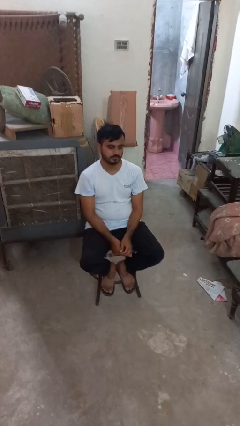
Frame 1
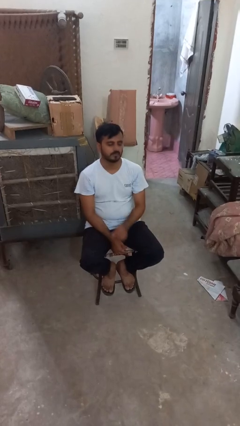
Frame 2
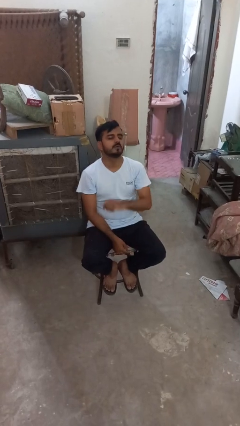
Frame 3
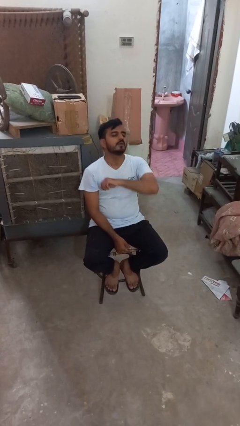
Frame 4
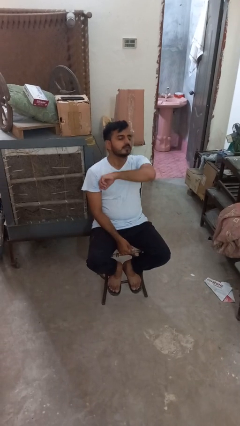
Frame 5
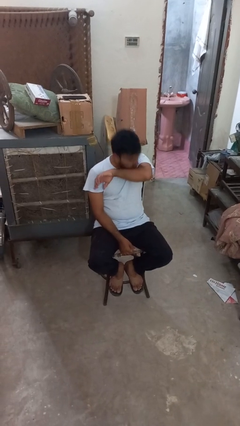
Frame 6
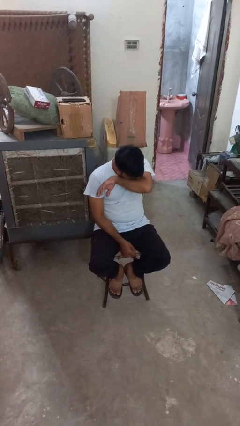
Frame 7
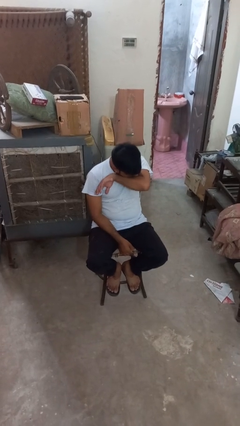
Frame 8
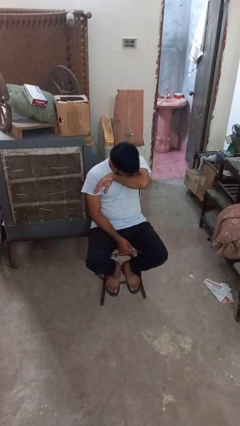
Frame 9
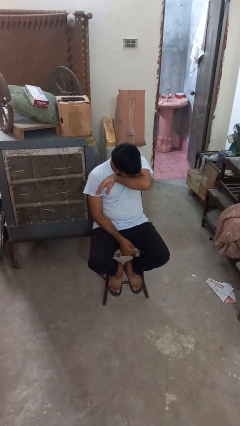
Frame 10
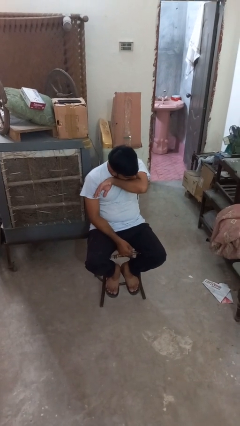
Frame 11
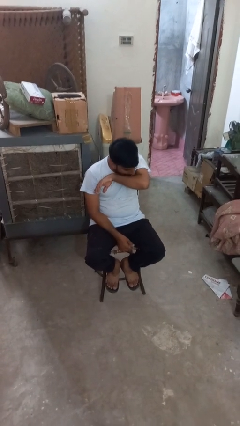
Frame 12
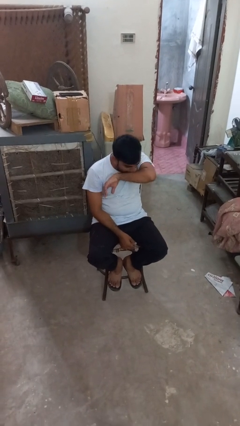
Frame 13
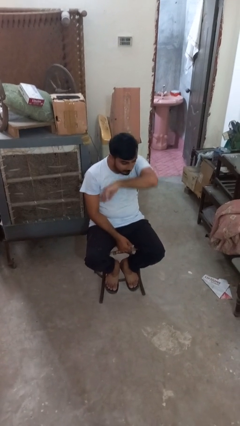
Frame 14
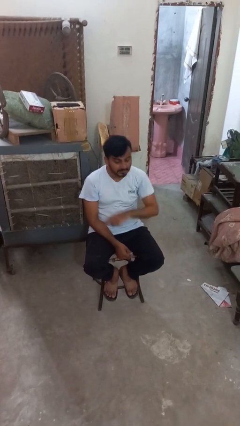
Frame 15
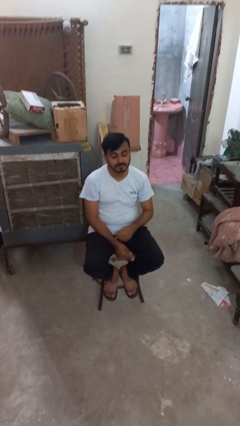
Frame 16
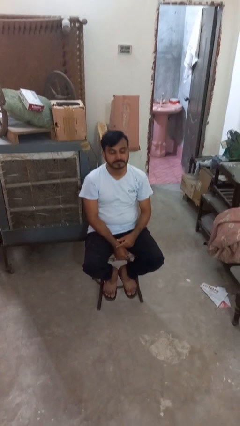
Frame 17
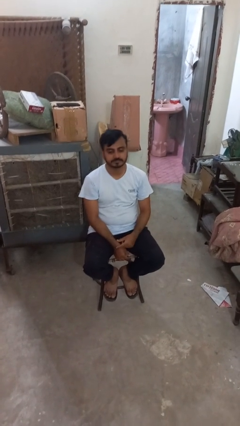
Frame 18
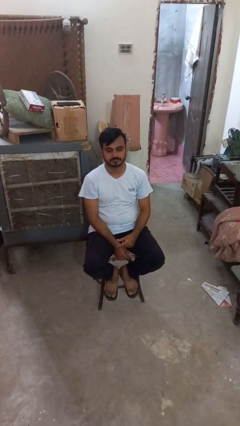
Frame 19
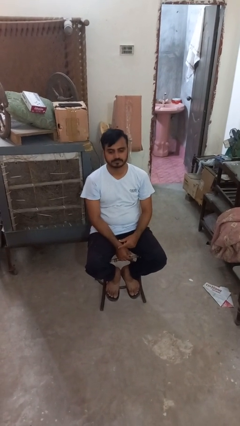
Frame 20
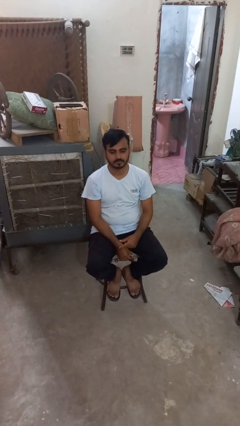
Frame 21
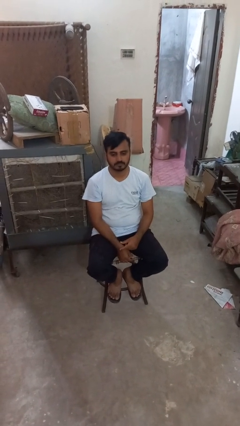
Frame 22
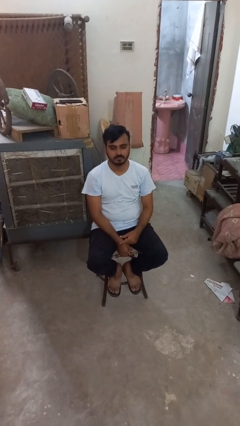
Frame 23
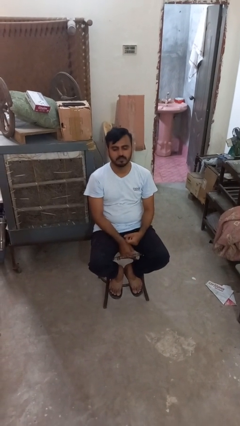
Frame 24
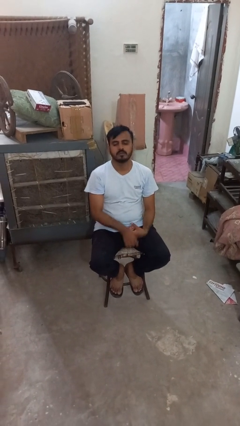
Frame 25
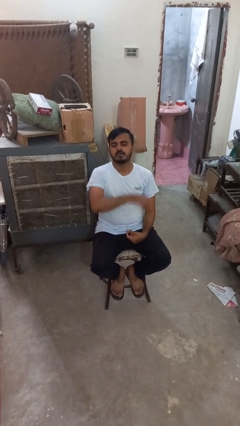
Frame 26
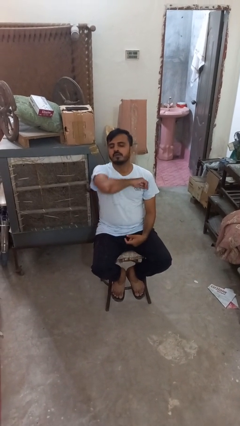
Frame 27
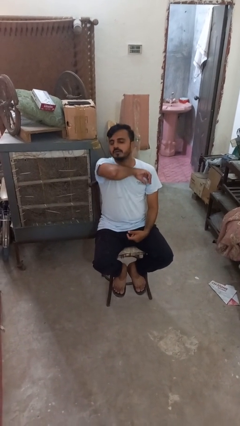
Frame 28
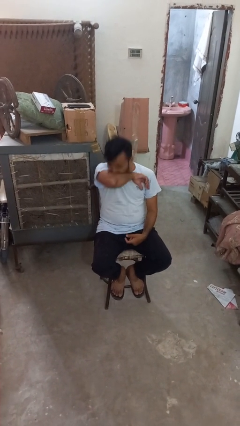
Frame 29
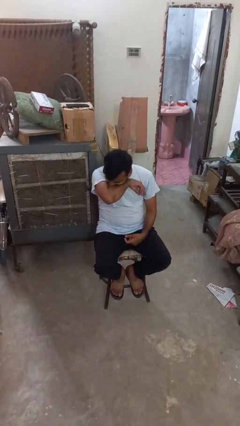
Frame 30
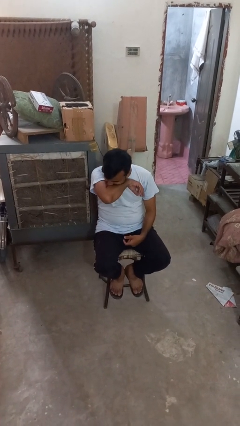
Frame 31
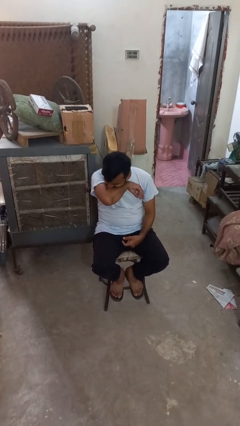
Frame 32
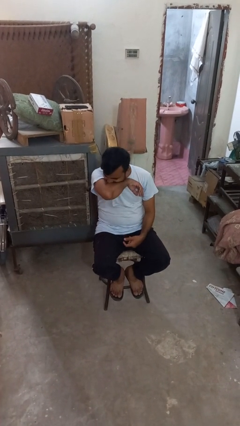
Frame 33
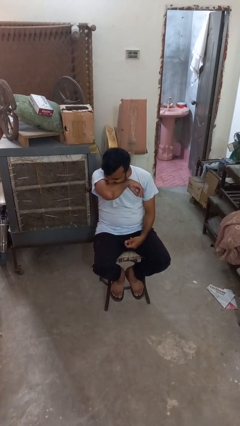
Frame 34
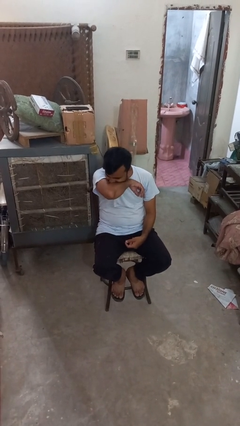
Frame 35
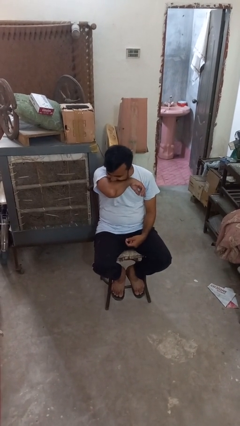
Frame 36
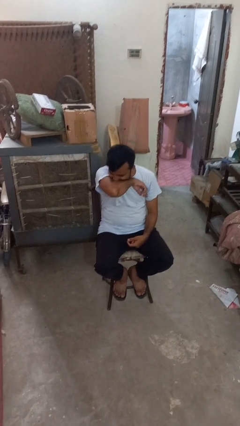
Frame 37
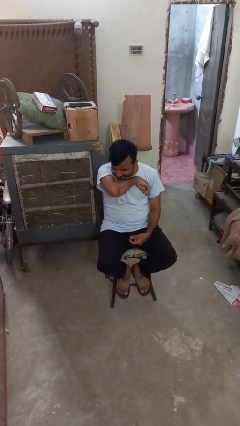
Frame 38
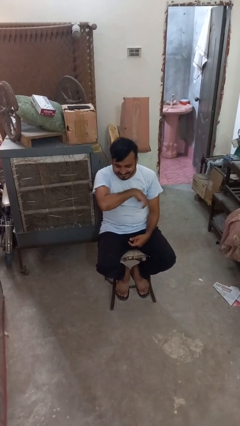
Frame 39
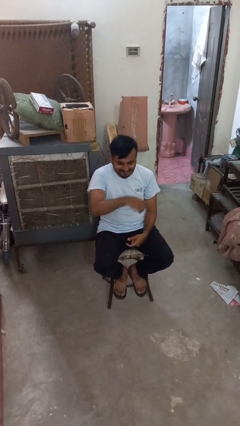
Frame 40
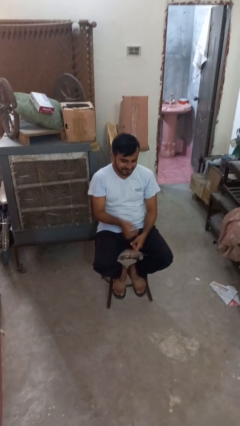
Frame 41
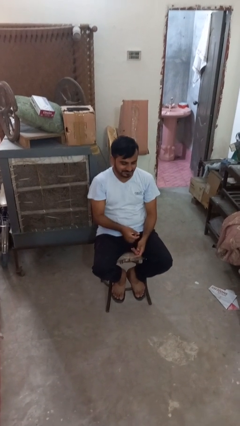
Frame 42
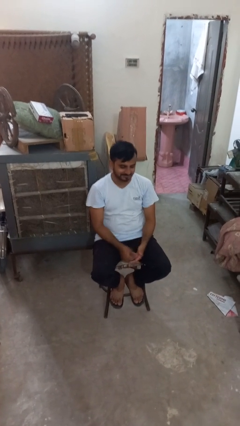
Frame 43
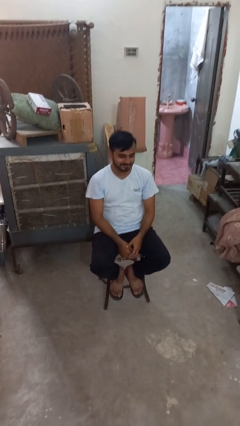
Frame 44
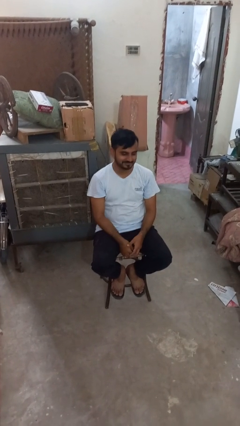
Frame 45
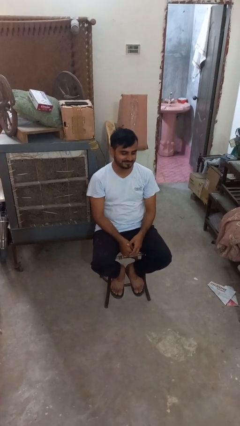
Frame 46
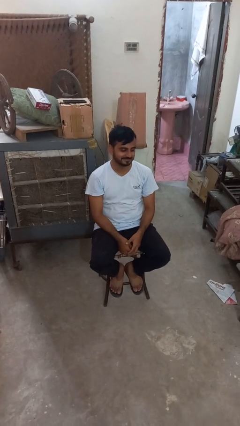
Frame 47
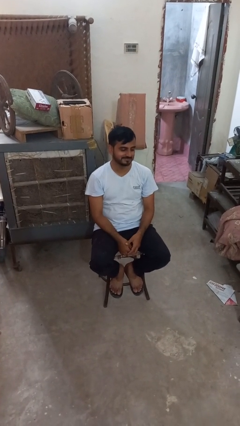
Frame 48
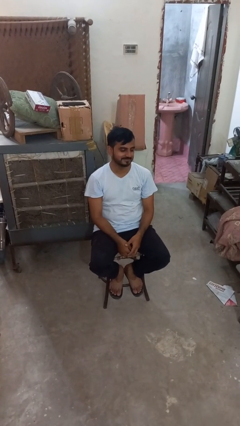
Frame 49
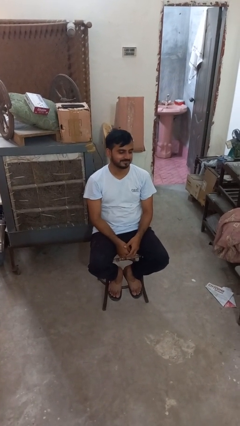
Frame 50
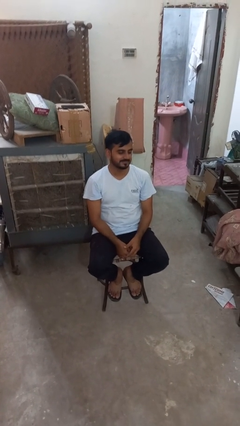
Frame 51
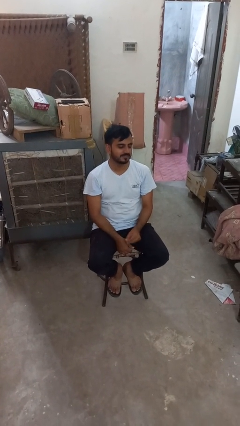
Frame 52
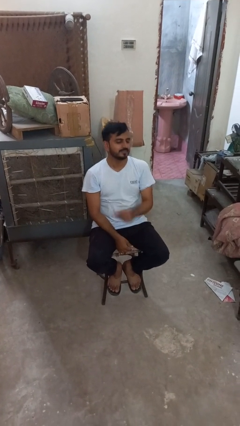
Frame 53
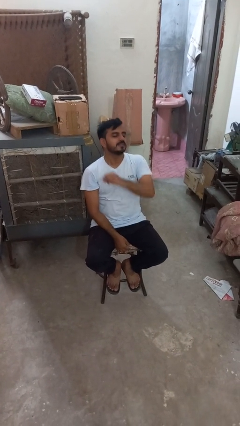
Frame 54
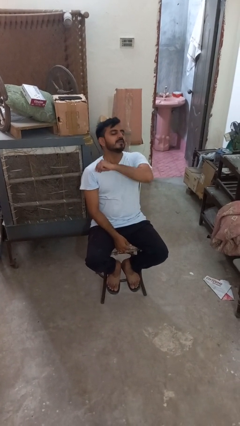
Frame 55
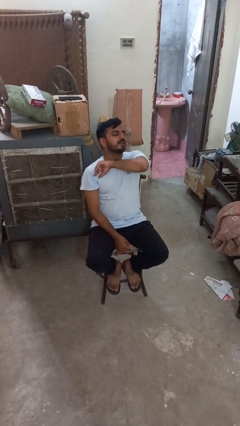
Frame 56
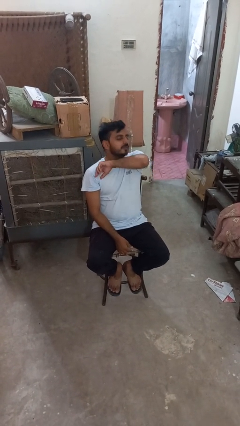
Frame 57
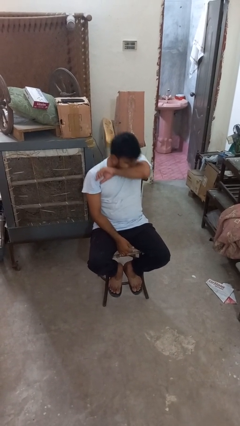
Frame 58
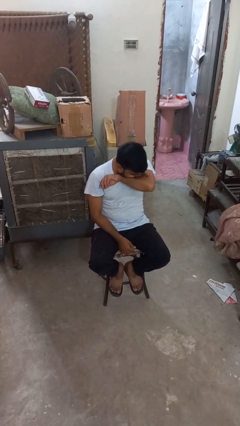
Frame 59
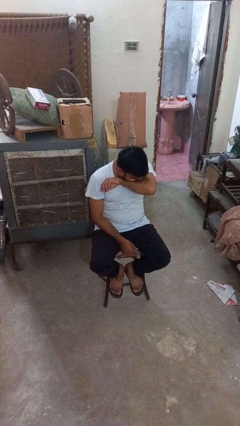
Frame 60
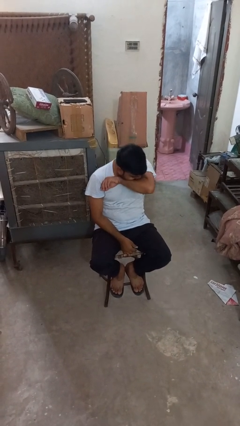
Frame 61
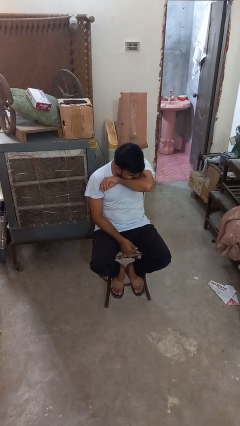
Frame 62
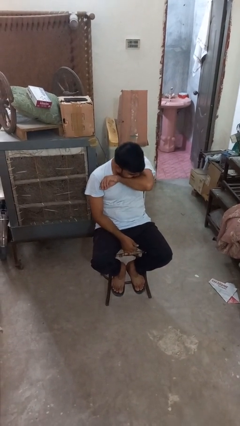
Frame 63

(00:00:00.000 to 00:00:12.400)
person sneezes into arm

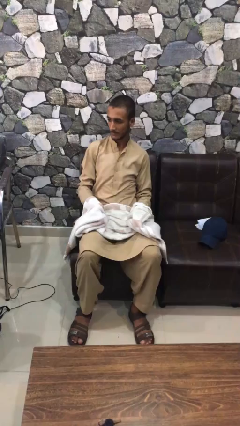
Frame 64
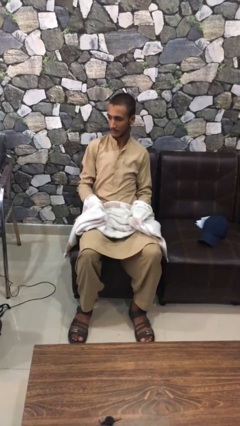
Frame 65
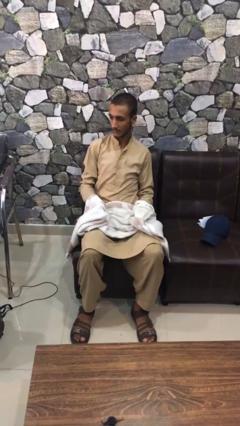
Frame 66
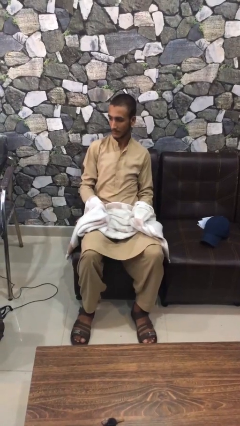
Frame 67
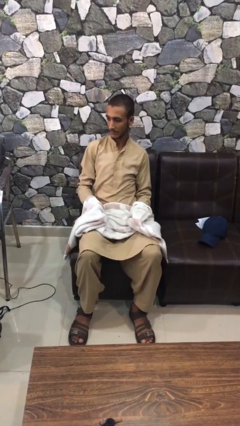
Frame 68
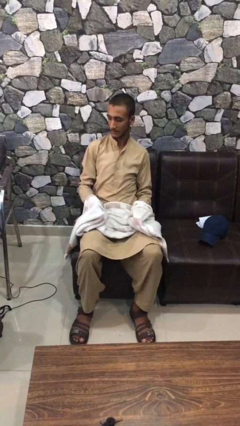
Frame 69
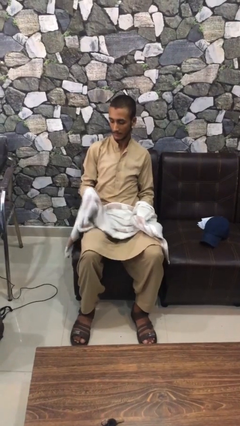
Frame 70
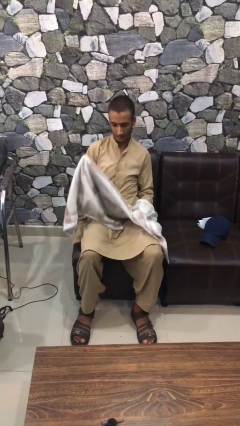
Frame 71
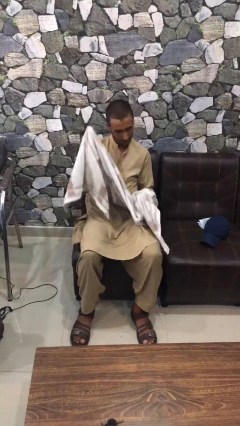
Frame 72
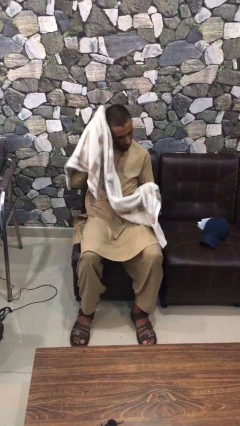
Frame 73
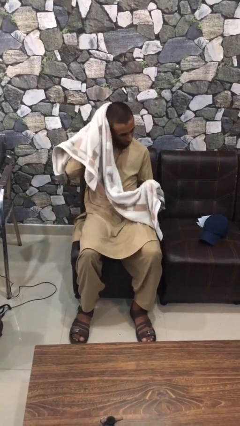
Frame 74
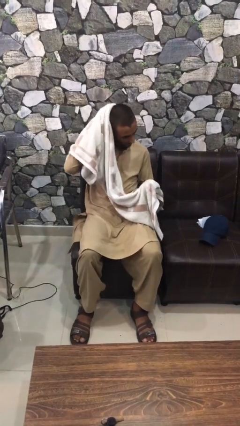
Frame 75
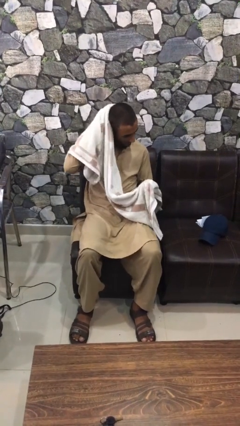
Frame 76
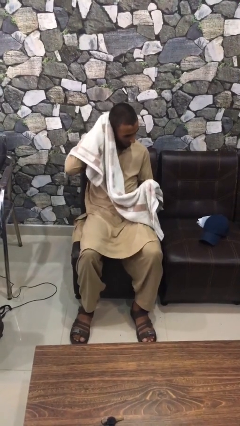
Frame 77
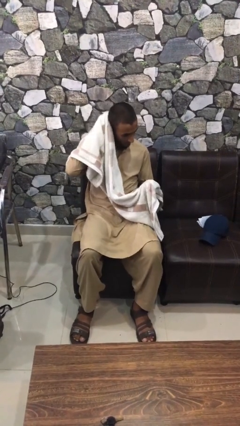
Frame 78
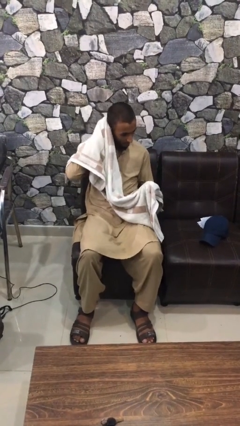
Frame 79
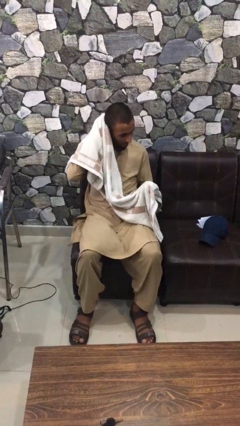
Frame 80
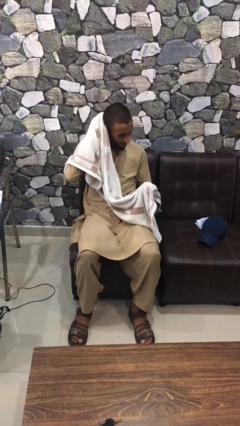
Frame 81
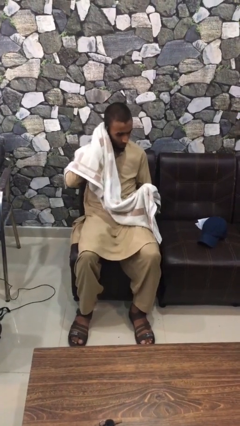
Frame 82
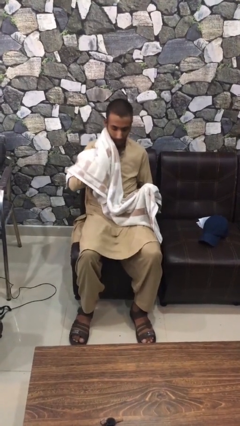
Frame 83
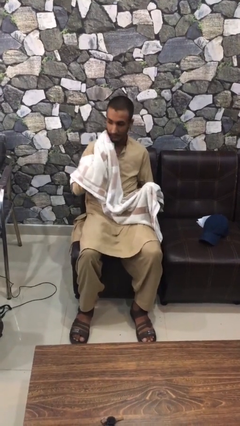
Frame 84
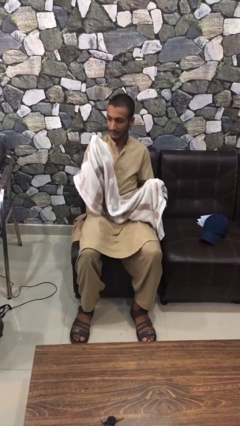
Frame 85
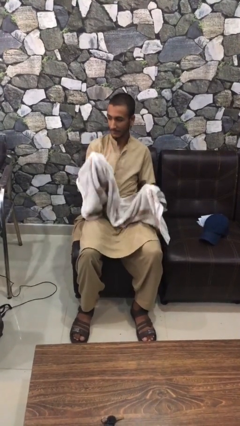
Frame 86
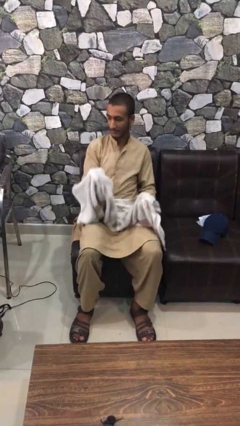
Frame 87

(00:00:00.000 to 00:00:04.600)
person dries hair with towel

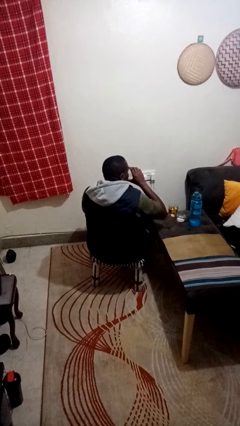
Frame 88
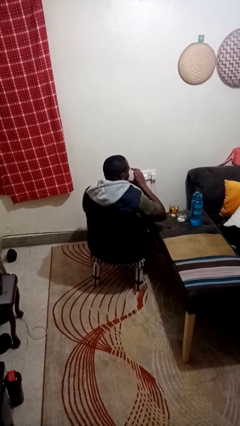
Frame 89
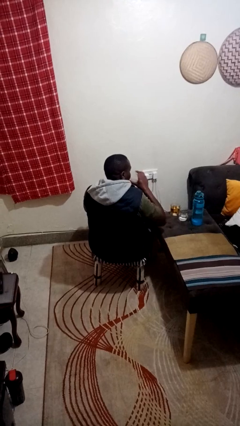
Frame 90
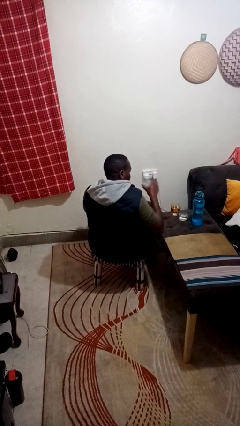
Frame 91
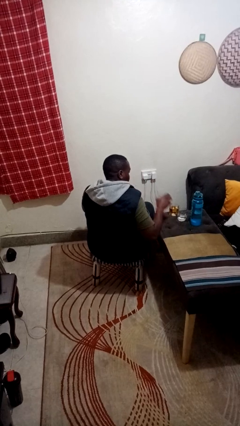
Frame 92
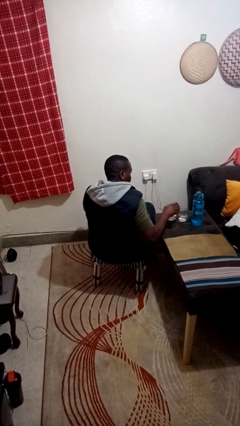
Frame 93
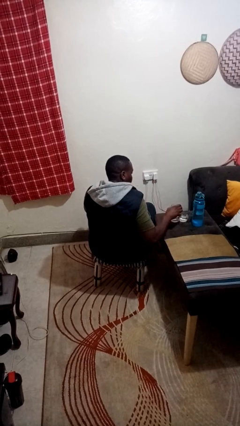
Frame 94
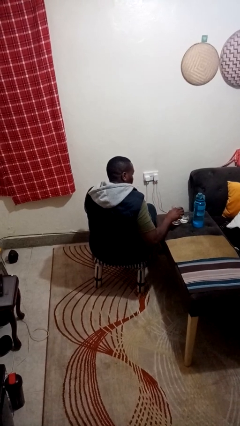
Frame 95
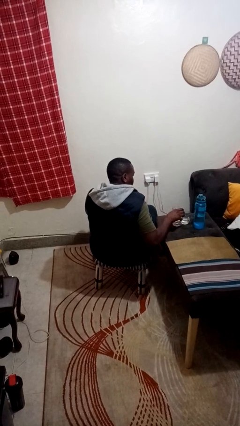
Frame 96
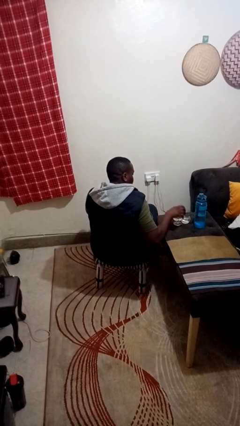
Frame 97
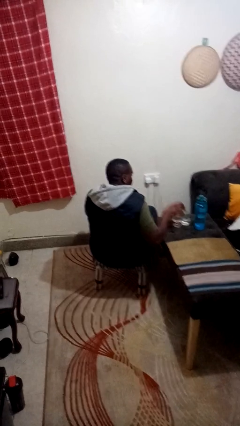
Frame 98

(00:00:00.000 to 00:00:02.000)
person puts down object on table
